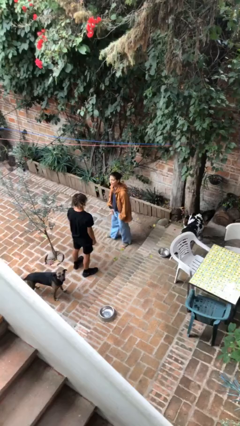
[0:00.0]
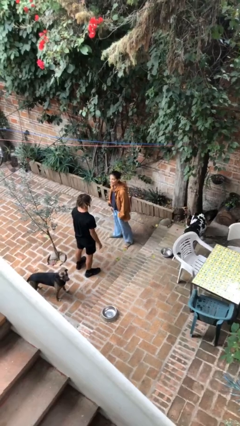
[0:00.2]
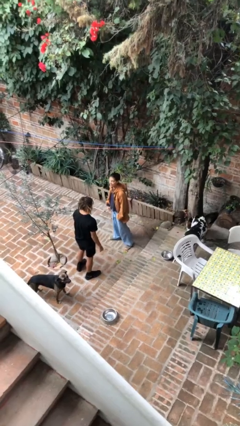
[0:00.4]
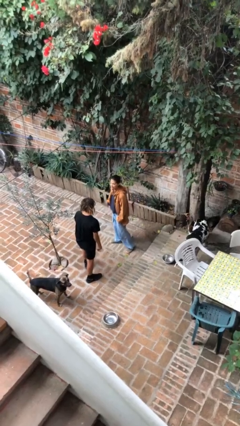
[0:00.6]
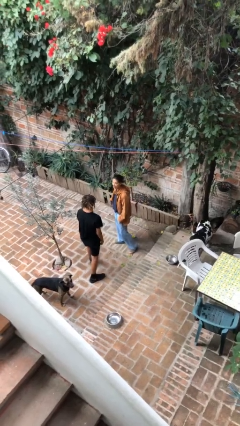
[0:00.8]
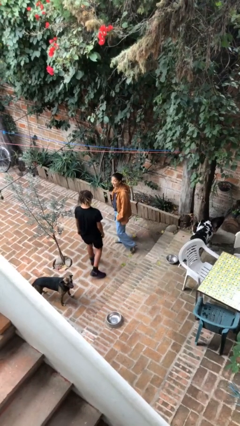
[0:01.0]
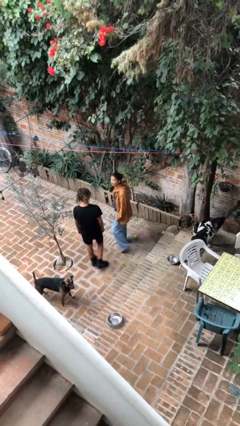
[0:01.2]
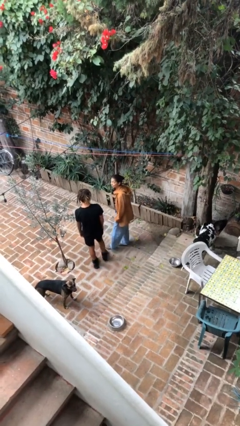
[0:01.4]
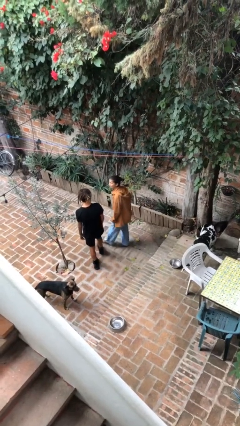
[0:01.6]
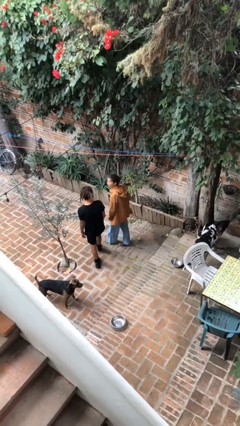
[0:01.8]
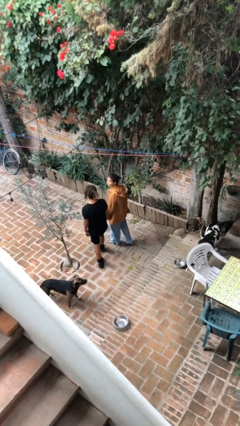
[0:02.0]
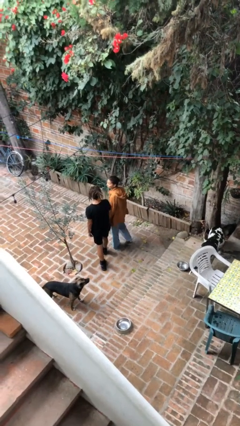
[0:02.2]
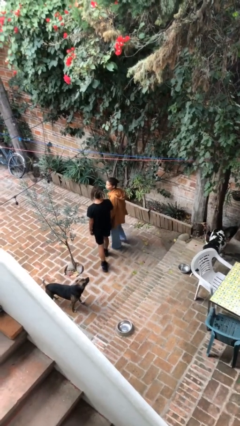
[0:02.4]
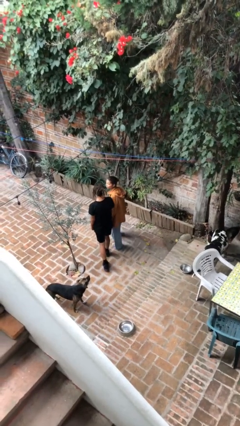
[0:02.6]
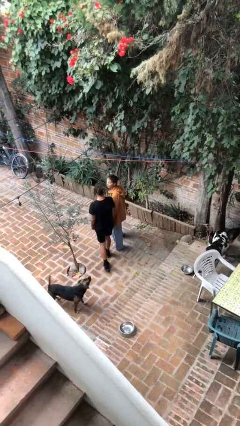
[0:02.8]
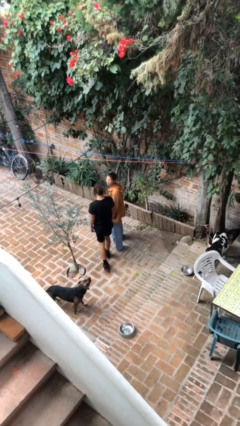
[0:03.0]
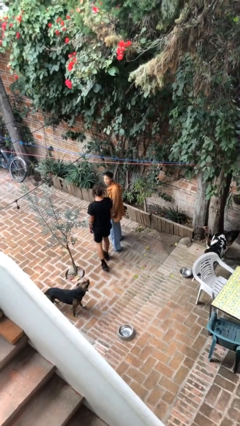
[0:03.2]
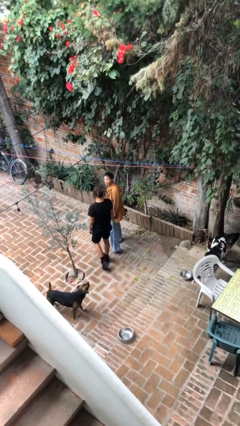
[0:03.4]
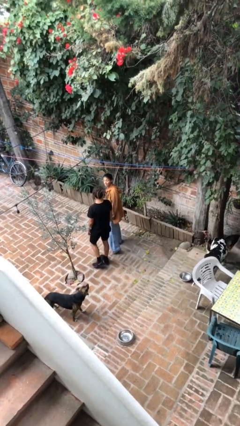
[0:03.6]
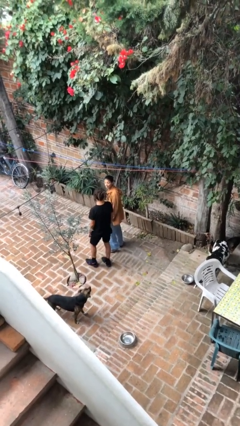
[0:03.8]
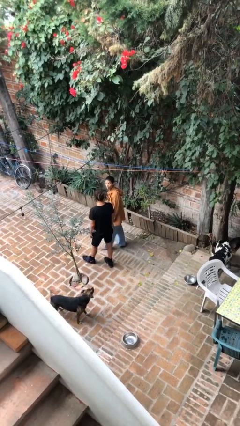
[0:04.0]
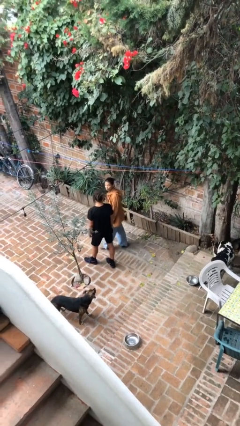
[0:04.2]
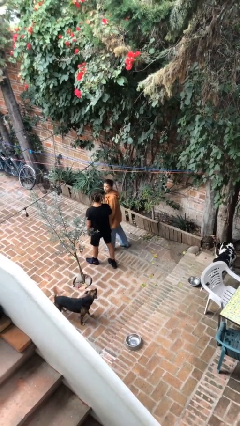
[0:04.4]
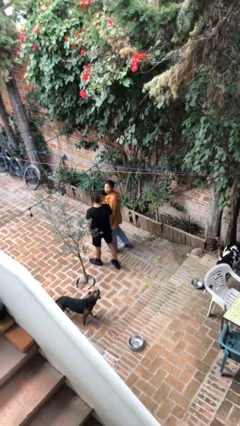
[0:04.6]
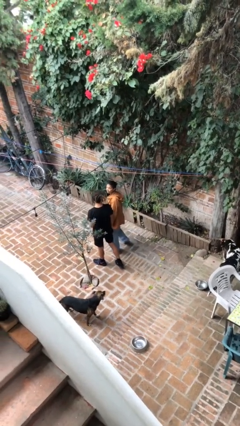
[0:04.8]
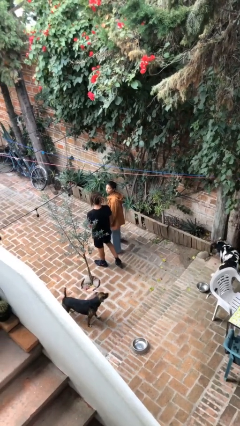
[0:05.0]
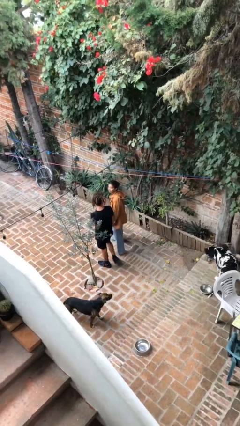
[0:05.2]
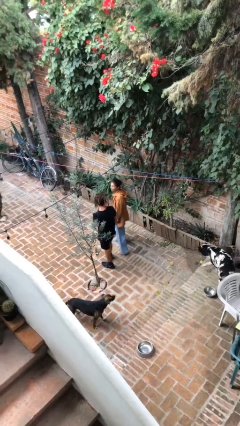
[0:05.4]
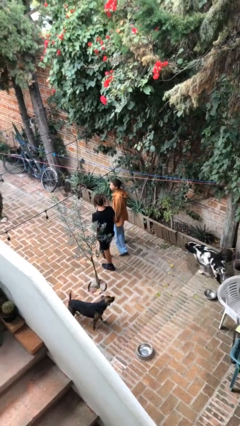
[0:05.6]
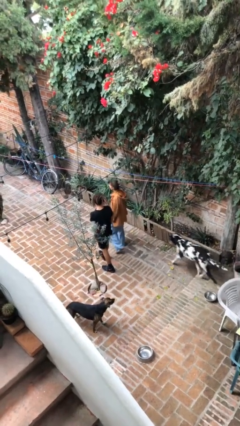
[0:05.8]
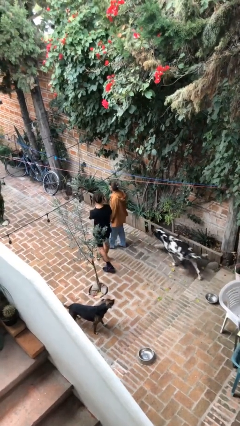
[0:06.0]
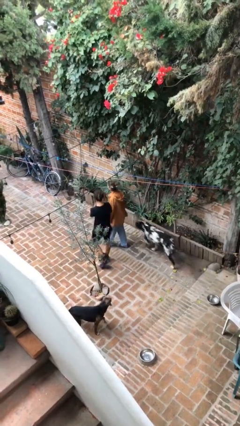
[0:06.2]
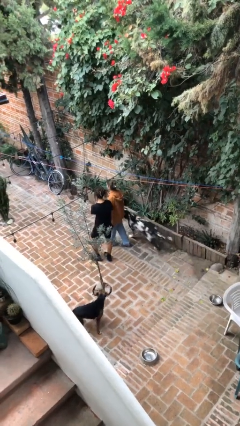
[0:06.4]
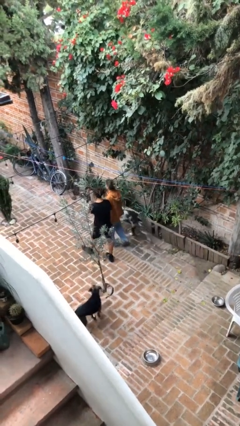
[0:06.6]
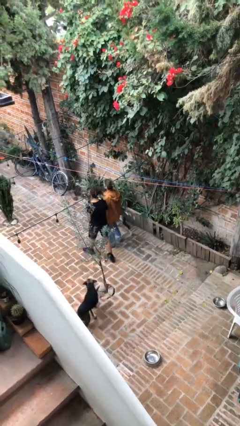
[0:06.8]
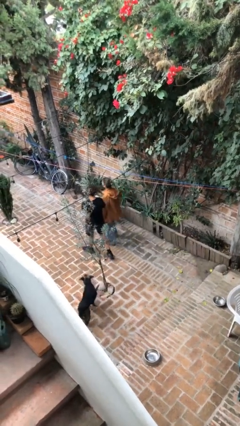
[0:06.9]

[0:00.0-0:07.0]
person talks to person

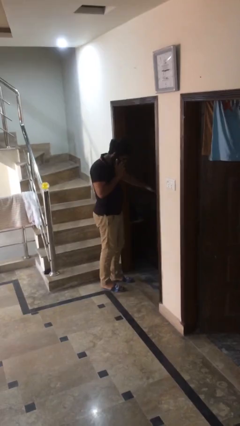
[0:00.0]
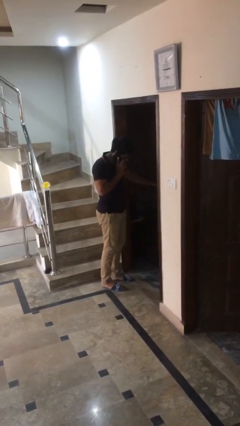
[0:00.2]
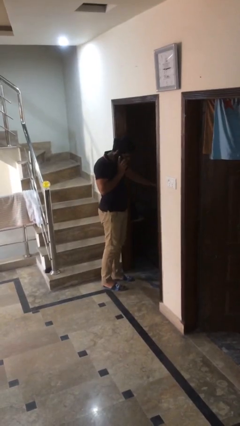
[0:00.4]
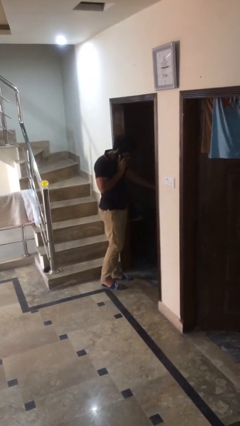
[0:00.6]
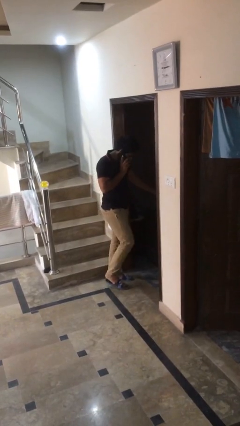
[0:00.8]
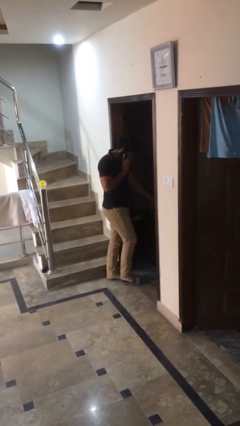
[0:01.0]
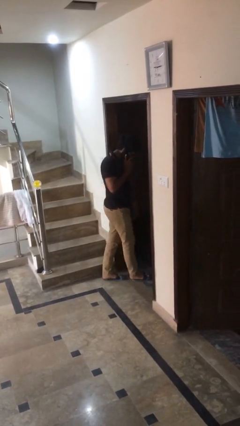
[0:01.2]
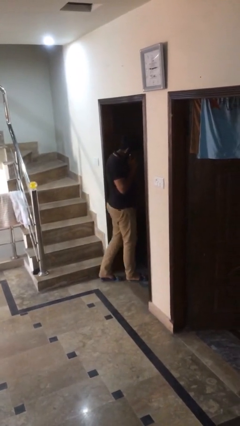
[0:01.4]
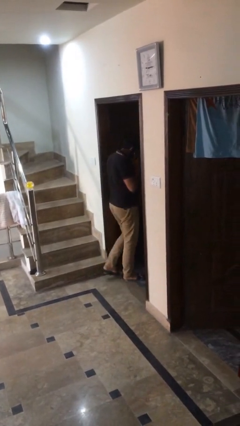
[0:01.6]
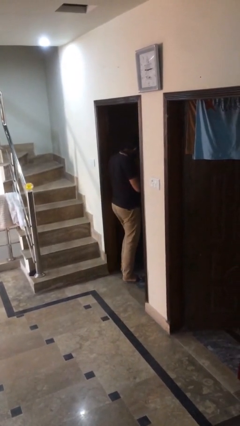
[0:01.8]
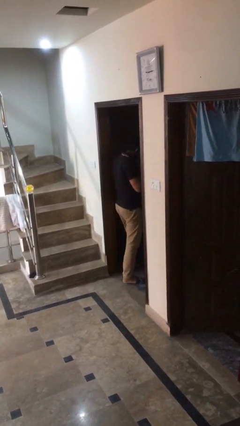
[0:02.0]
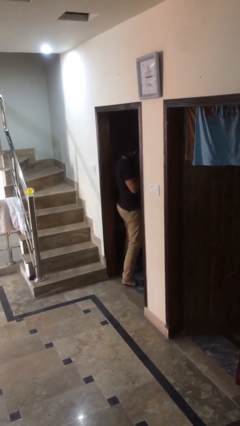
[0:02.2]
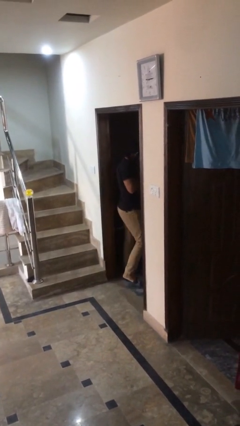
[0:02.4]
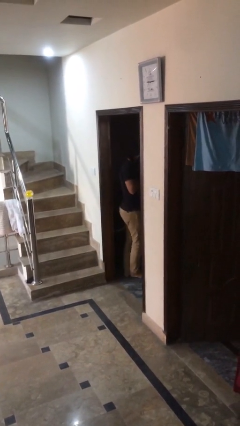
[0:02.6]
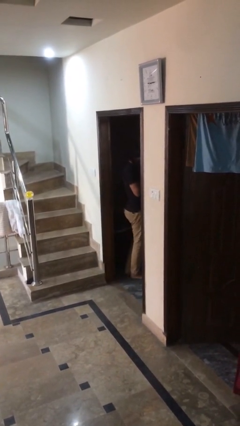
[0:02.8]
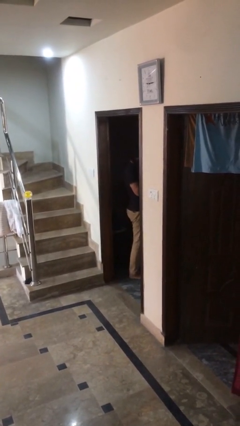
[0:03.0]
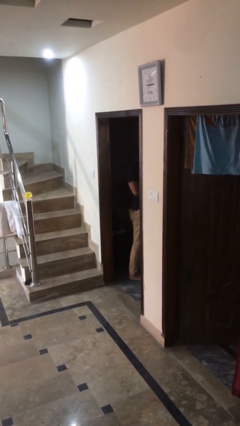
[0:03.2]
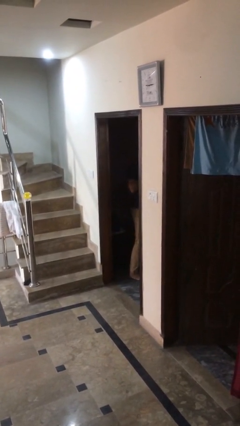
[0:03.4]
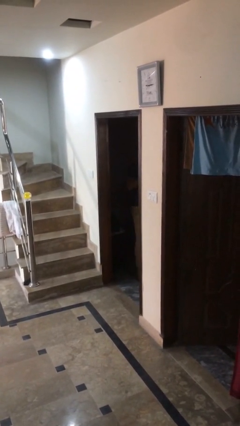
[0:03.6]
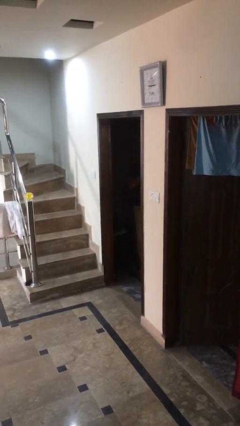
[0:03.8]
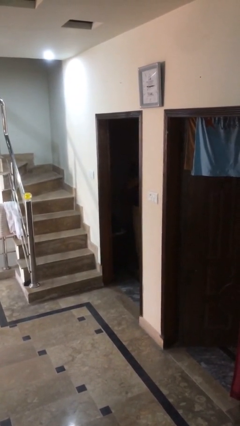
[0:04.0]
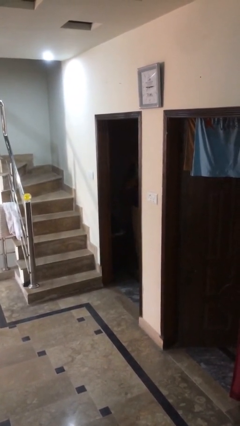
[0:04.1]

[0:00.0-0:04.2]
person exits scene through structure

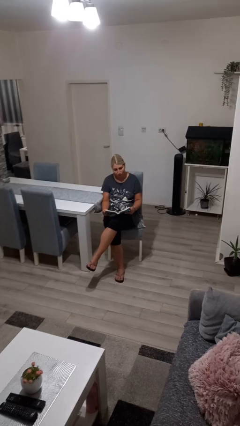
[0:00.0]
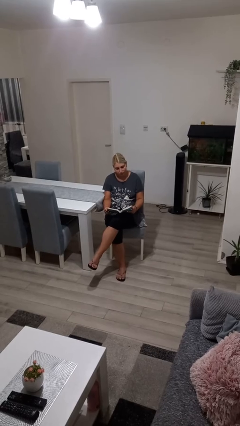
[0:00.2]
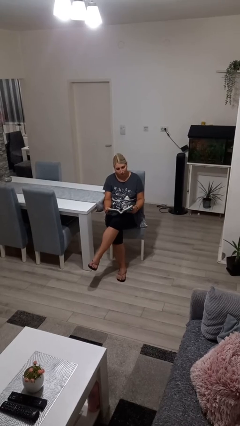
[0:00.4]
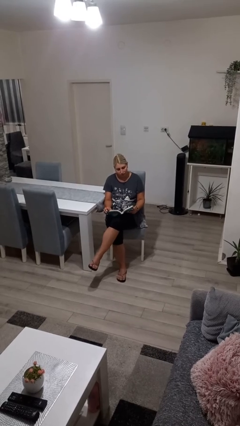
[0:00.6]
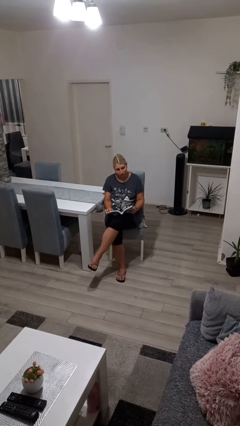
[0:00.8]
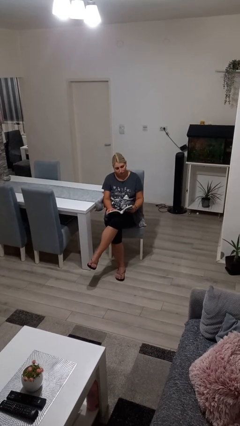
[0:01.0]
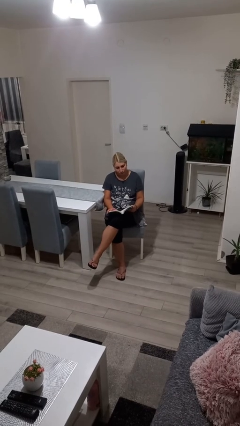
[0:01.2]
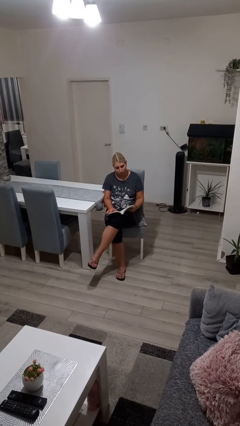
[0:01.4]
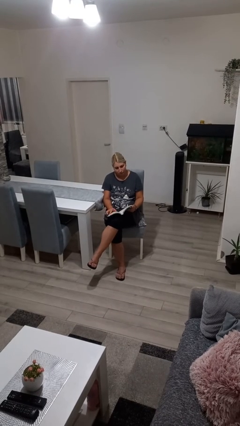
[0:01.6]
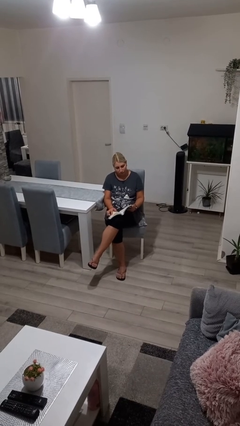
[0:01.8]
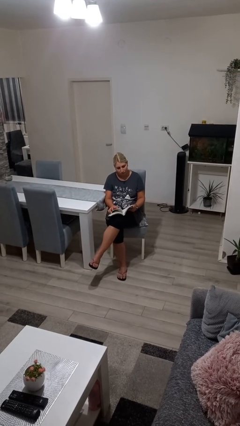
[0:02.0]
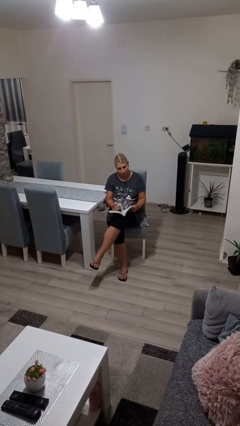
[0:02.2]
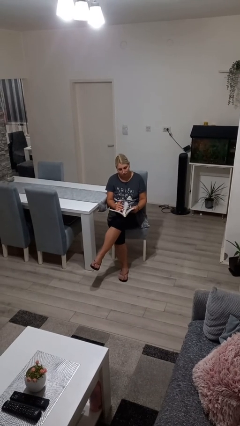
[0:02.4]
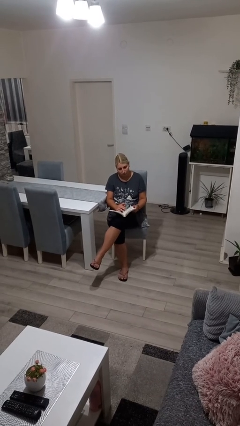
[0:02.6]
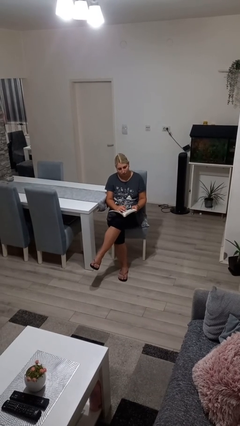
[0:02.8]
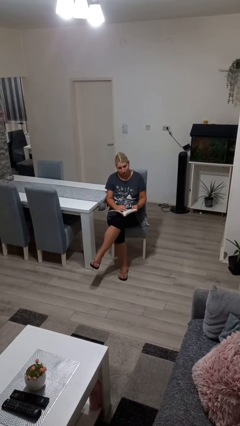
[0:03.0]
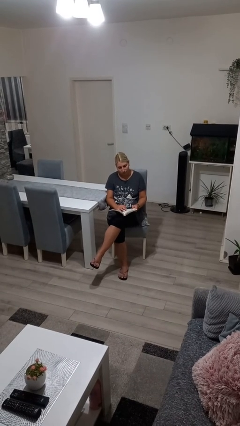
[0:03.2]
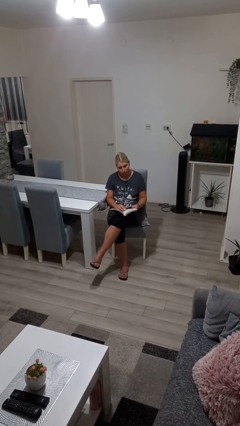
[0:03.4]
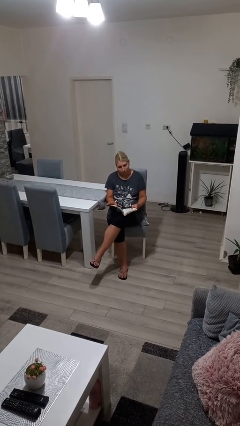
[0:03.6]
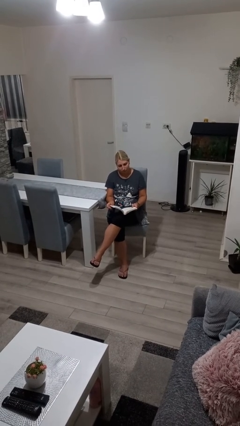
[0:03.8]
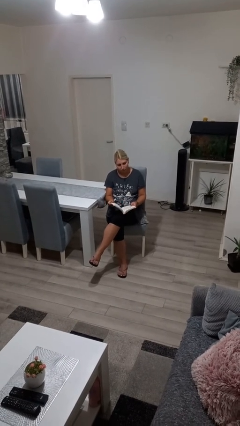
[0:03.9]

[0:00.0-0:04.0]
person reads book

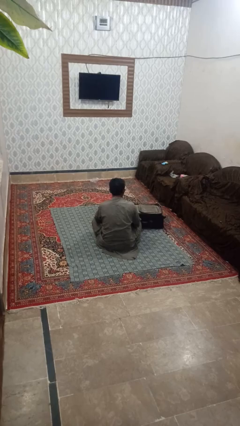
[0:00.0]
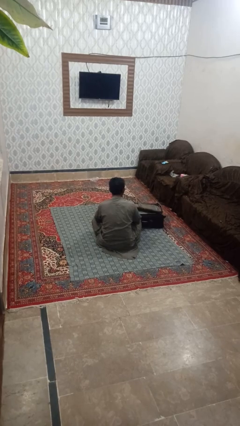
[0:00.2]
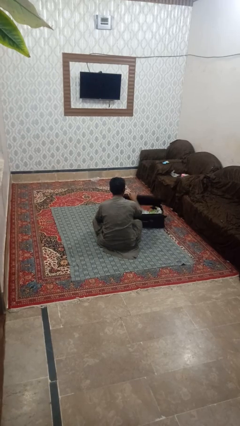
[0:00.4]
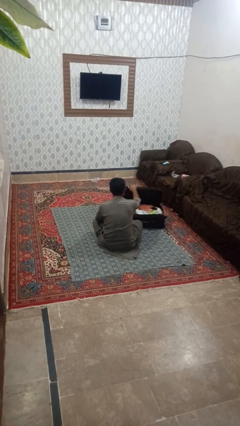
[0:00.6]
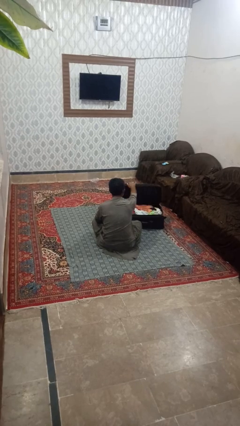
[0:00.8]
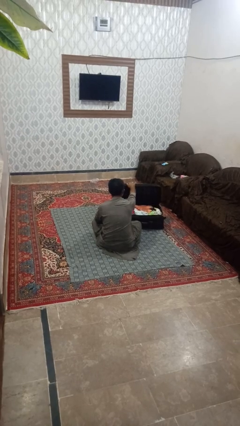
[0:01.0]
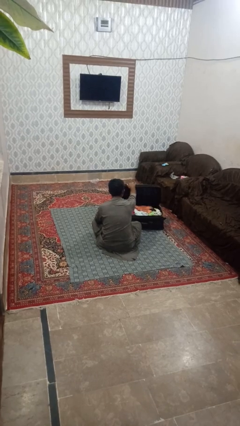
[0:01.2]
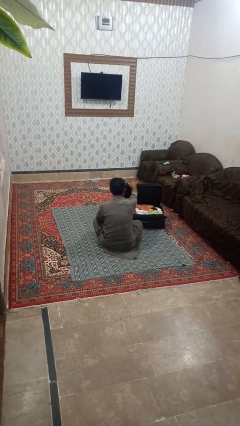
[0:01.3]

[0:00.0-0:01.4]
person opens suitcase

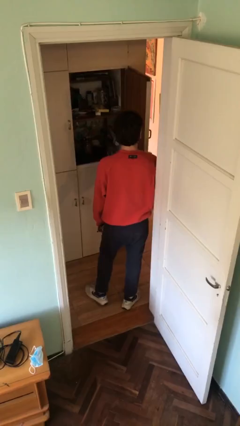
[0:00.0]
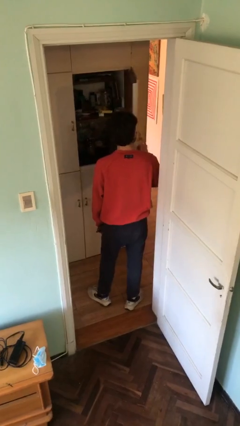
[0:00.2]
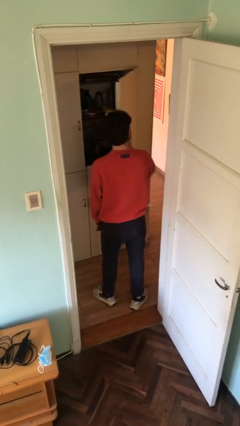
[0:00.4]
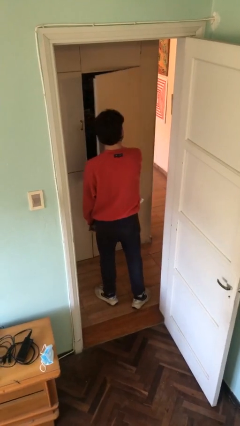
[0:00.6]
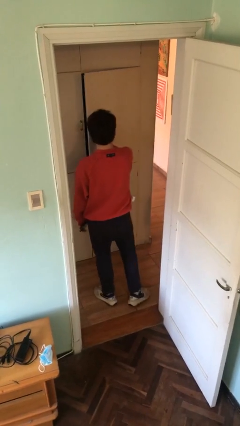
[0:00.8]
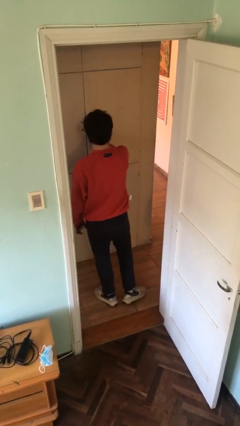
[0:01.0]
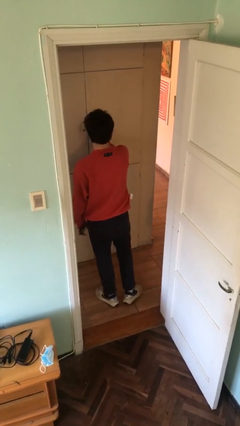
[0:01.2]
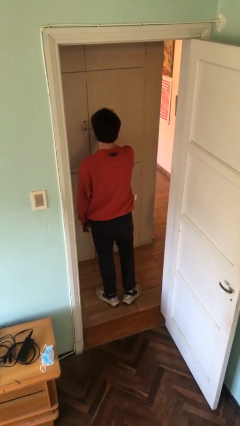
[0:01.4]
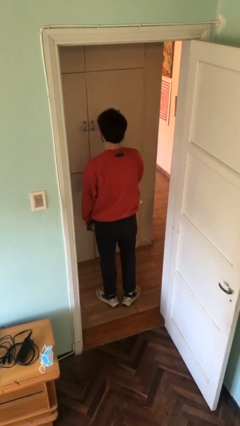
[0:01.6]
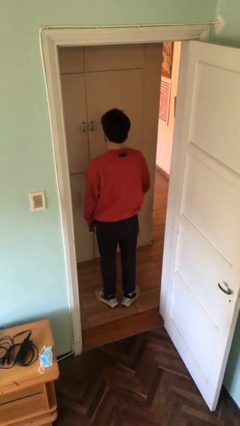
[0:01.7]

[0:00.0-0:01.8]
person closes closet door
